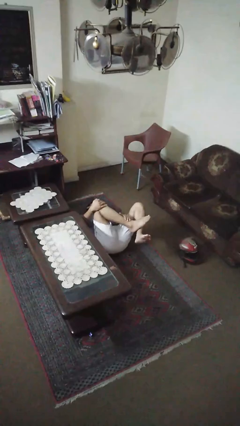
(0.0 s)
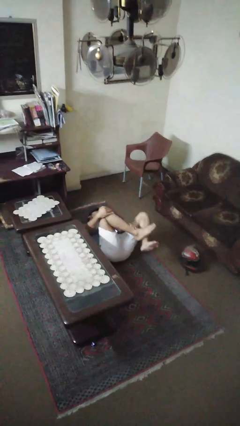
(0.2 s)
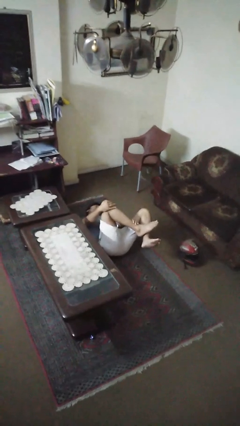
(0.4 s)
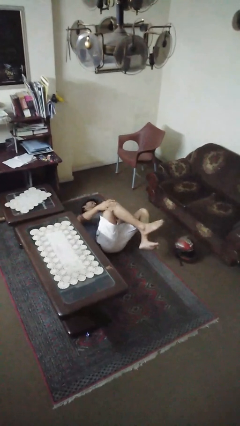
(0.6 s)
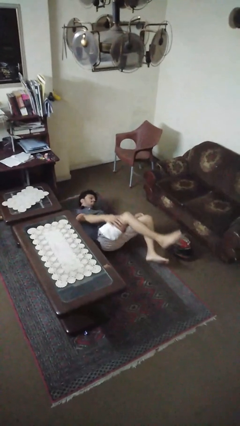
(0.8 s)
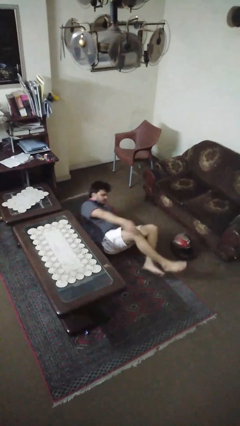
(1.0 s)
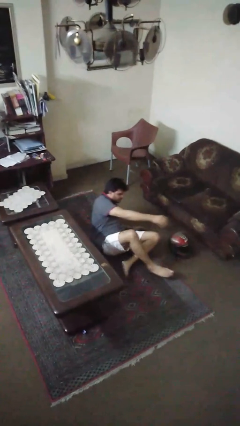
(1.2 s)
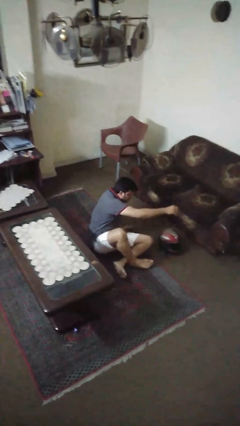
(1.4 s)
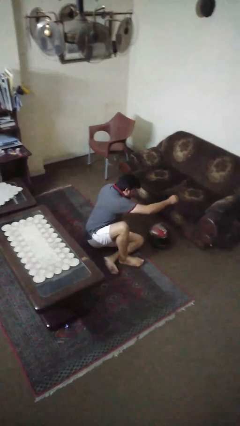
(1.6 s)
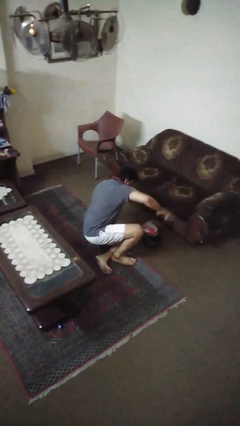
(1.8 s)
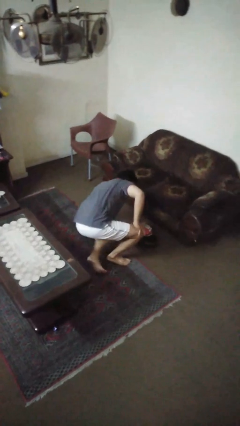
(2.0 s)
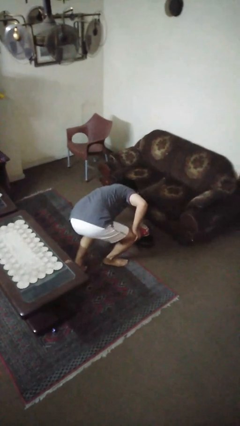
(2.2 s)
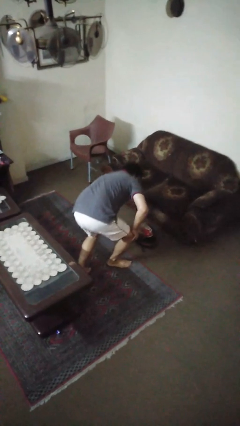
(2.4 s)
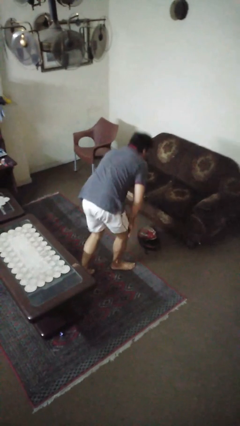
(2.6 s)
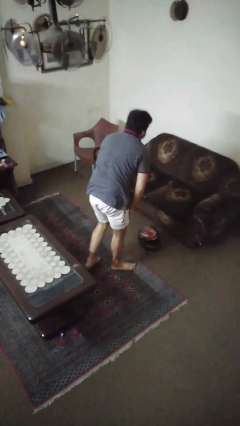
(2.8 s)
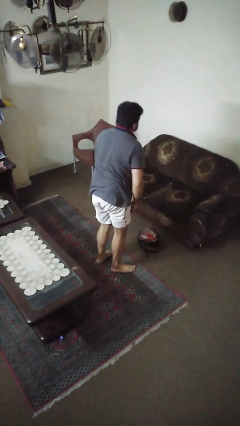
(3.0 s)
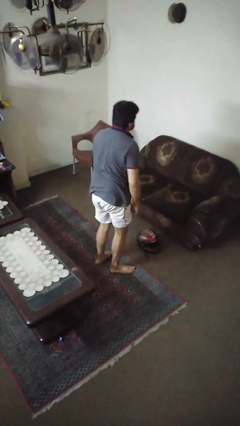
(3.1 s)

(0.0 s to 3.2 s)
person stands up from floor

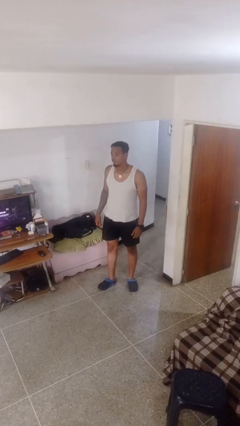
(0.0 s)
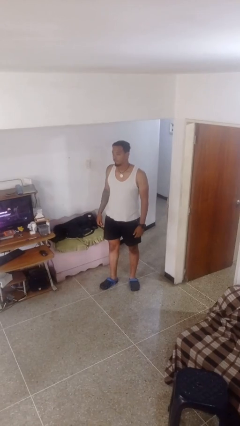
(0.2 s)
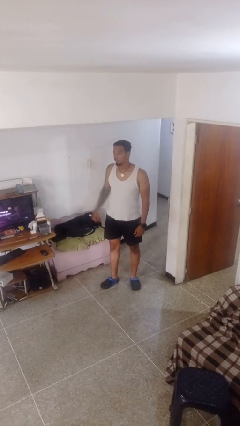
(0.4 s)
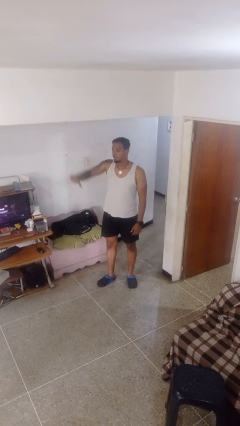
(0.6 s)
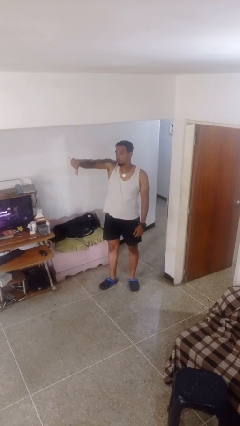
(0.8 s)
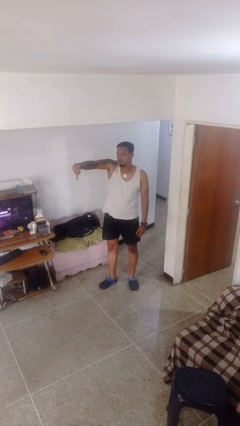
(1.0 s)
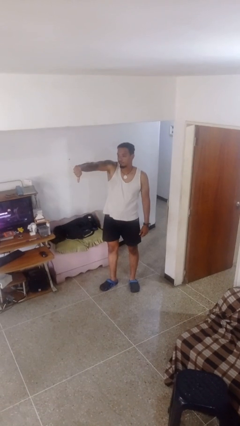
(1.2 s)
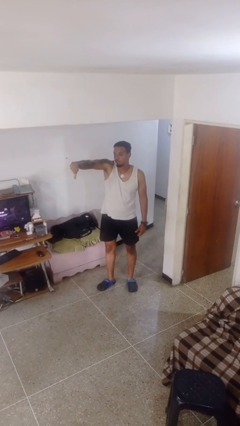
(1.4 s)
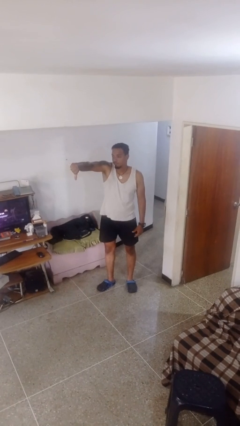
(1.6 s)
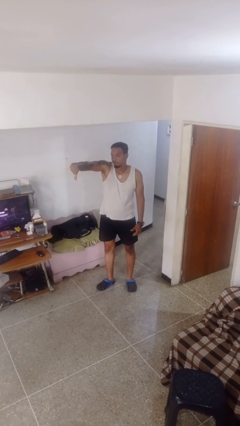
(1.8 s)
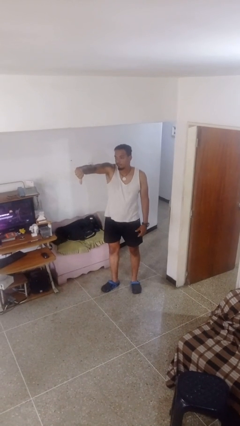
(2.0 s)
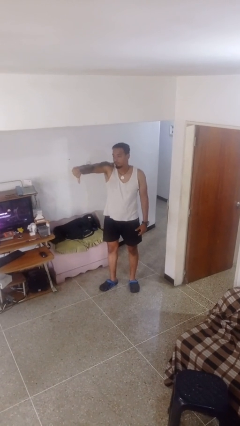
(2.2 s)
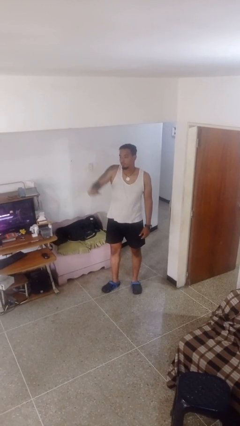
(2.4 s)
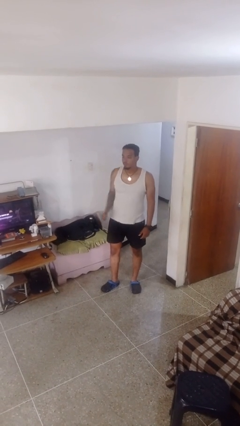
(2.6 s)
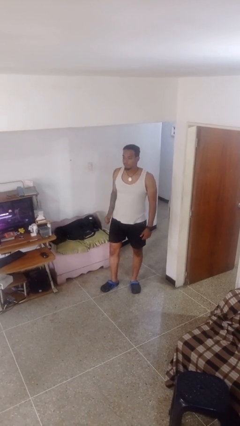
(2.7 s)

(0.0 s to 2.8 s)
person gestures thumbs down

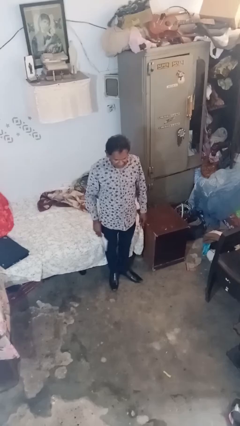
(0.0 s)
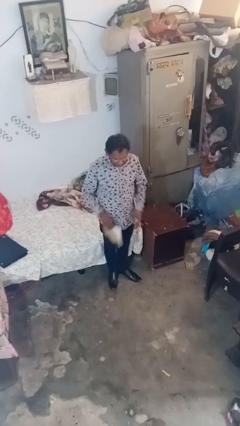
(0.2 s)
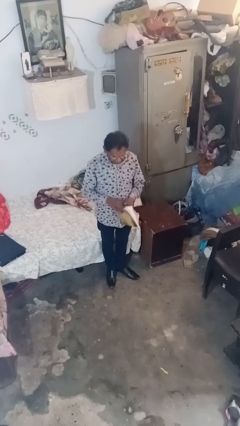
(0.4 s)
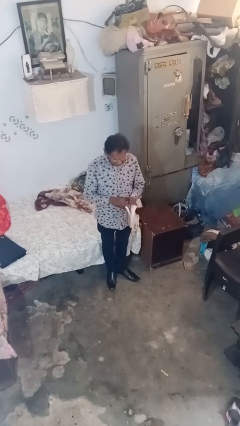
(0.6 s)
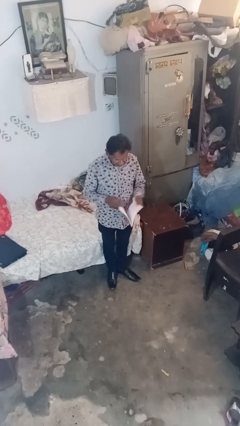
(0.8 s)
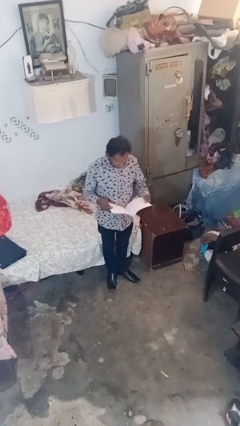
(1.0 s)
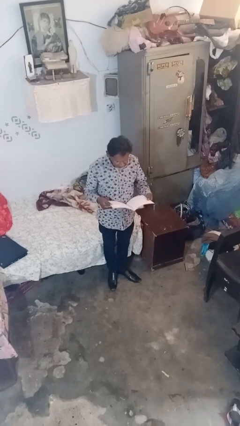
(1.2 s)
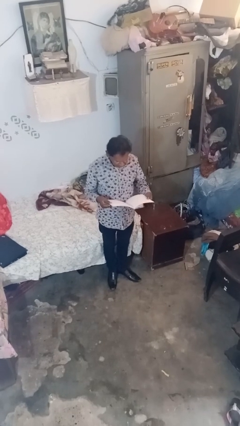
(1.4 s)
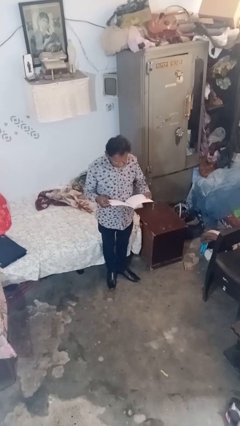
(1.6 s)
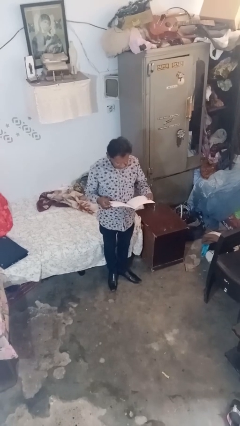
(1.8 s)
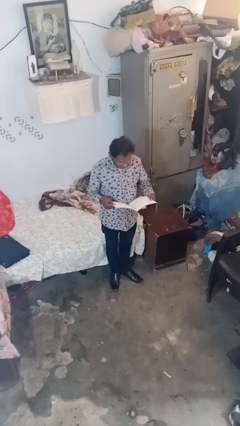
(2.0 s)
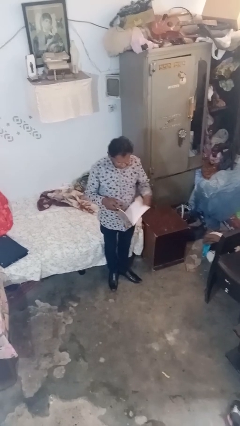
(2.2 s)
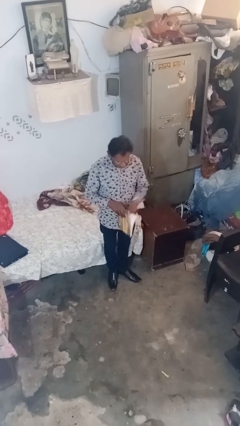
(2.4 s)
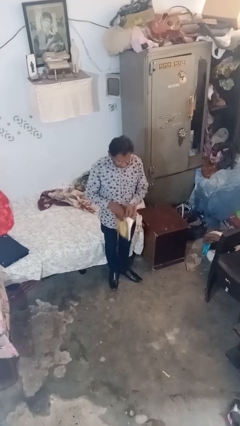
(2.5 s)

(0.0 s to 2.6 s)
person reads document

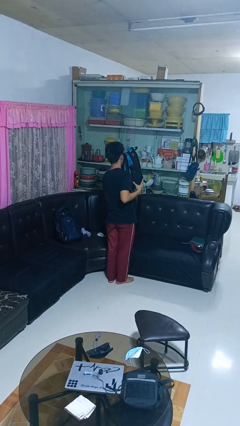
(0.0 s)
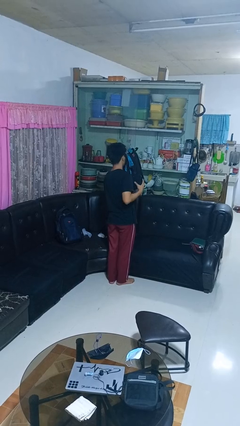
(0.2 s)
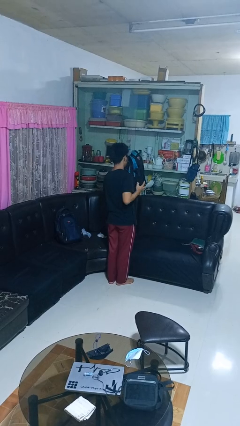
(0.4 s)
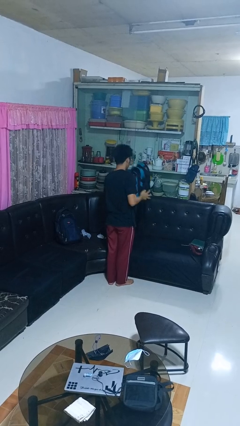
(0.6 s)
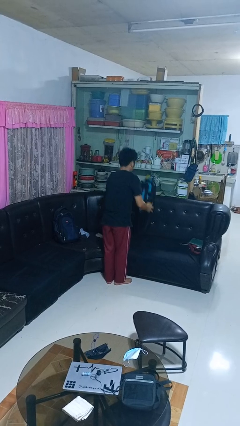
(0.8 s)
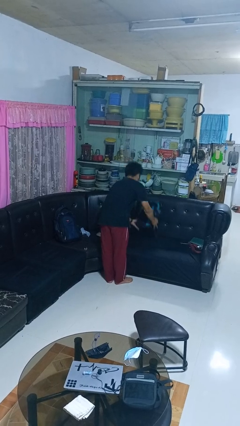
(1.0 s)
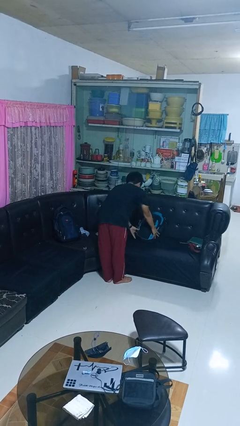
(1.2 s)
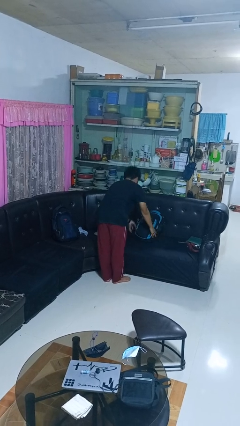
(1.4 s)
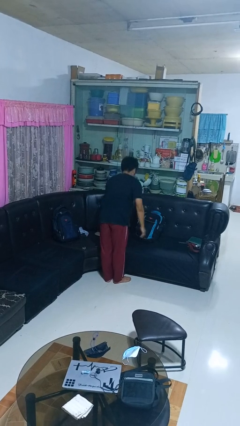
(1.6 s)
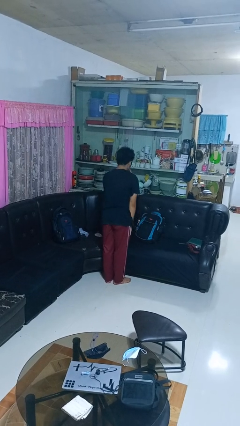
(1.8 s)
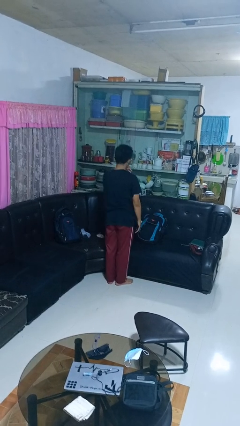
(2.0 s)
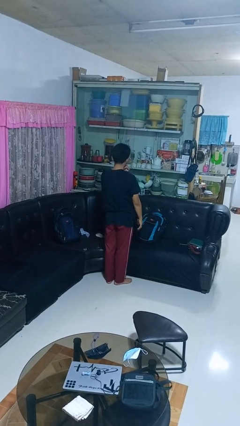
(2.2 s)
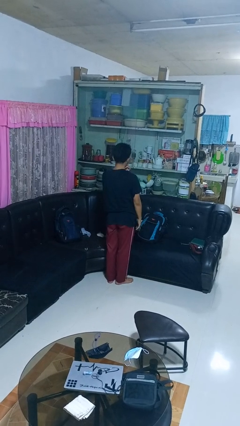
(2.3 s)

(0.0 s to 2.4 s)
person puts down object on couch

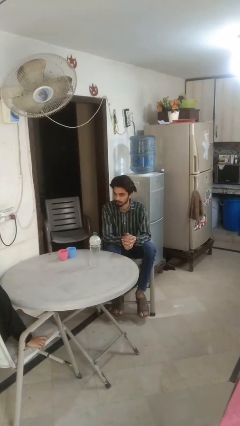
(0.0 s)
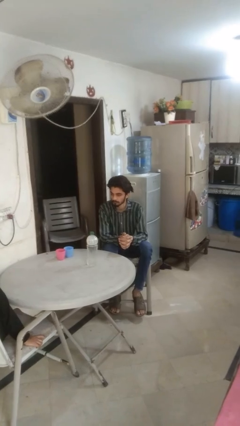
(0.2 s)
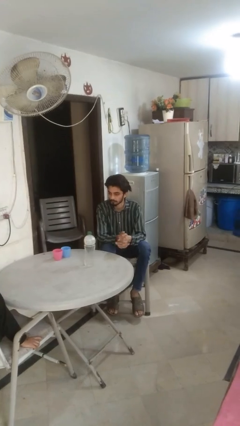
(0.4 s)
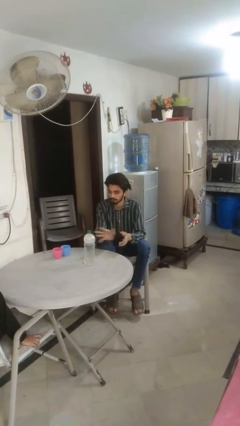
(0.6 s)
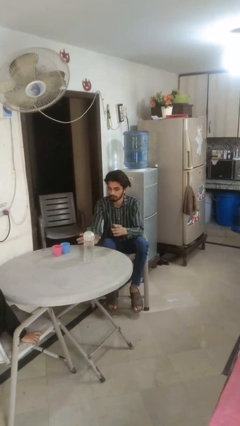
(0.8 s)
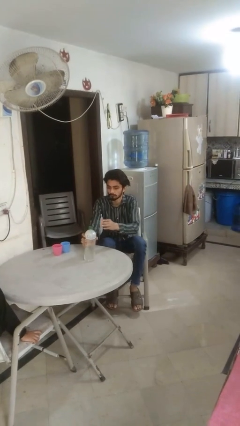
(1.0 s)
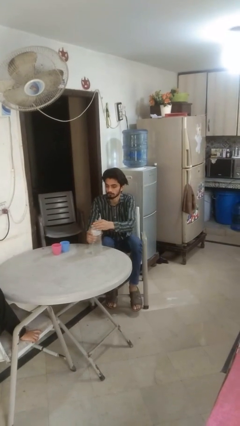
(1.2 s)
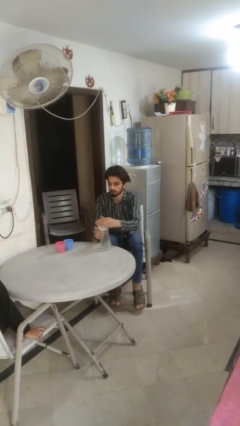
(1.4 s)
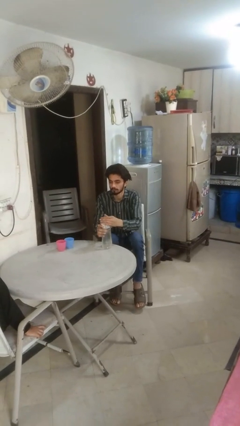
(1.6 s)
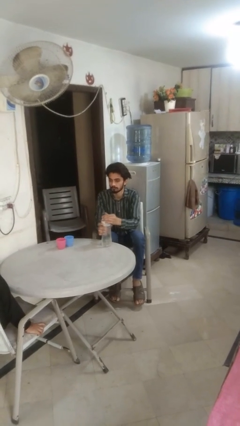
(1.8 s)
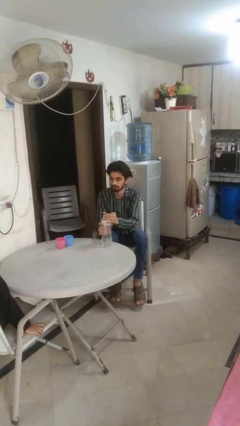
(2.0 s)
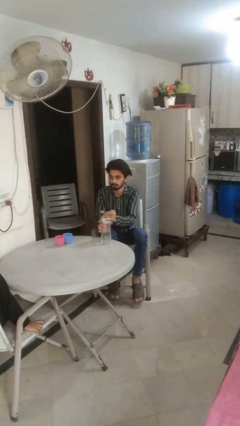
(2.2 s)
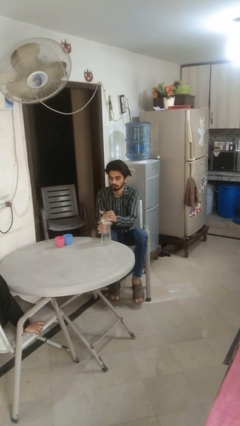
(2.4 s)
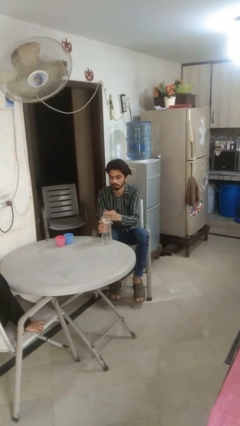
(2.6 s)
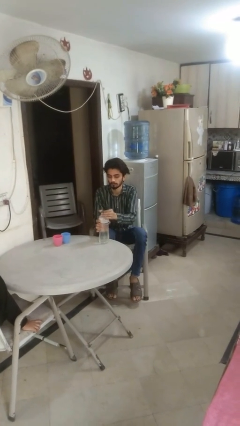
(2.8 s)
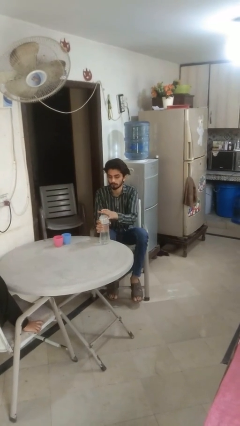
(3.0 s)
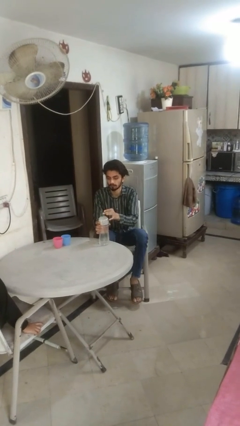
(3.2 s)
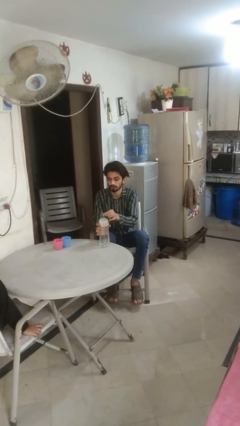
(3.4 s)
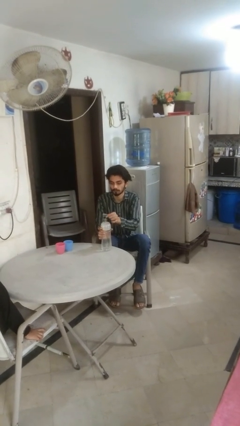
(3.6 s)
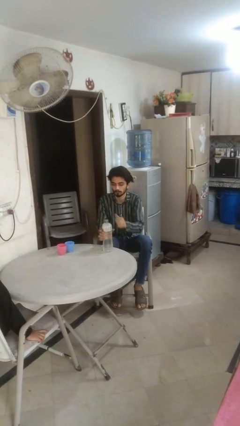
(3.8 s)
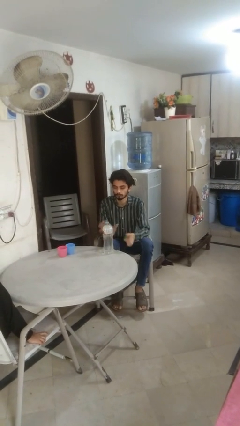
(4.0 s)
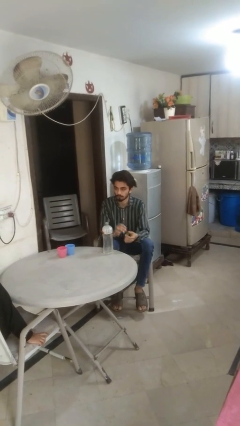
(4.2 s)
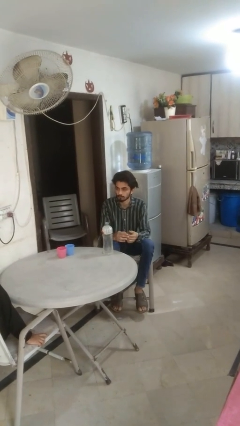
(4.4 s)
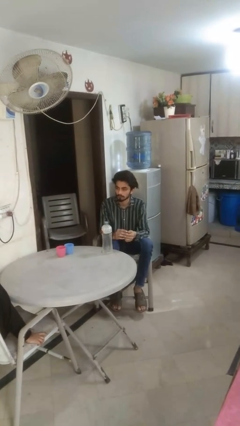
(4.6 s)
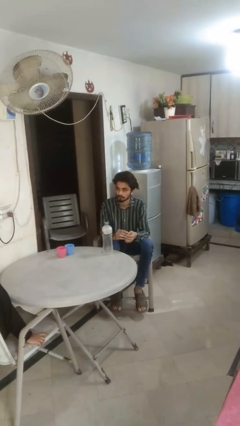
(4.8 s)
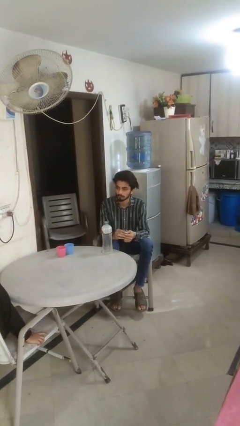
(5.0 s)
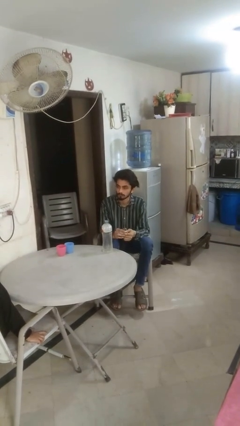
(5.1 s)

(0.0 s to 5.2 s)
person unscrews lid from bottle

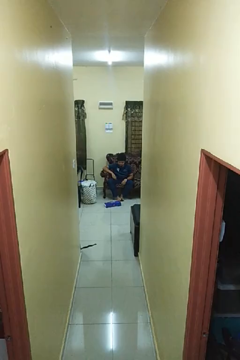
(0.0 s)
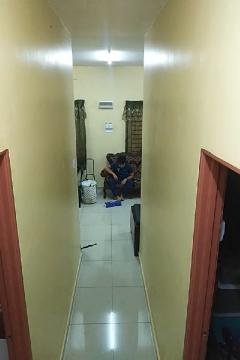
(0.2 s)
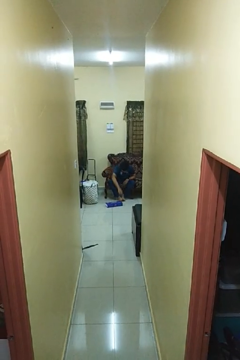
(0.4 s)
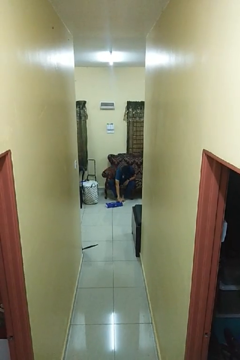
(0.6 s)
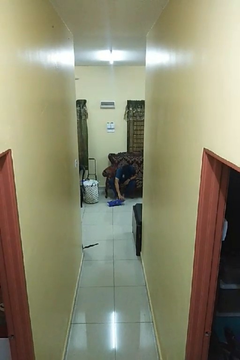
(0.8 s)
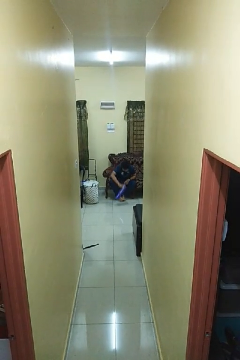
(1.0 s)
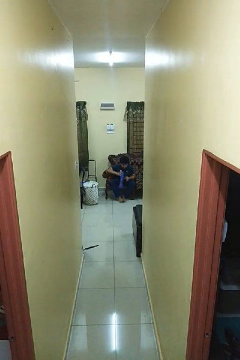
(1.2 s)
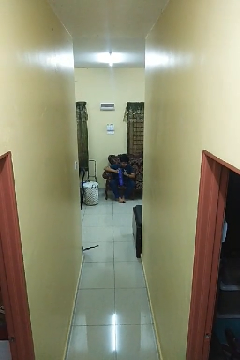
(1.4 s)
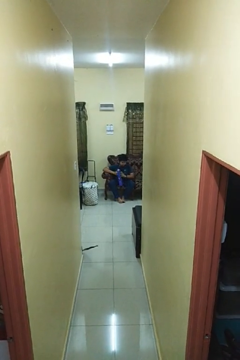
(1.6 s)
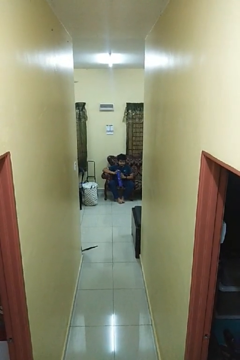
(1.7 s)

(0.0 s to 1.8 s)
person picks up object from floor

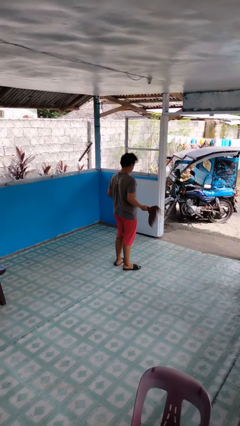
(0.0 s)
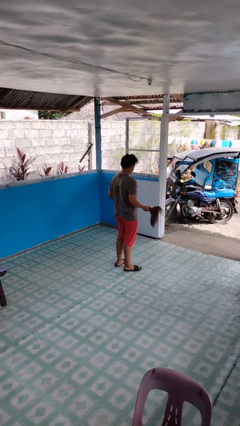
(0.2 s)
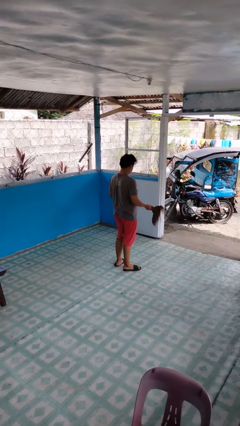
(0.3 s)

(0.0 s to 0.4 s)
person throws object to ground
